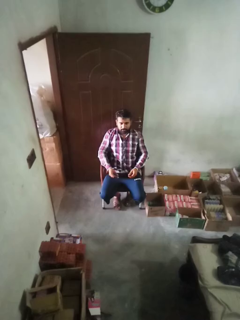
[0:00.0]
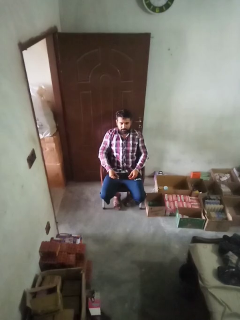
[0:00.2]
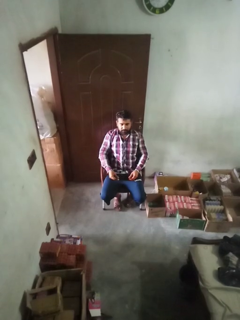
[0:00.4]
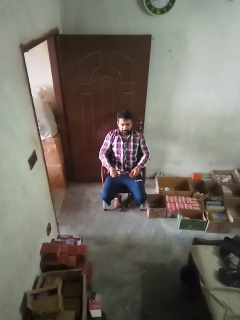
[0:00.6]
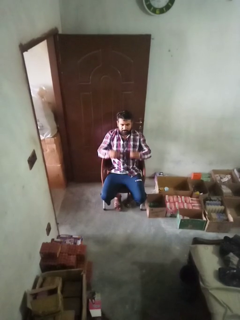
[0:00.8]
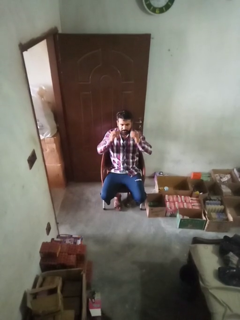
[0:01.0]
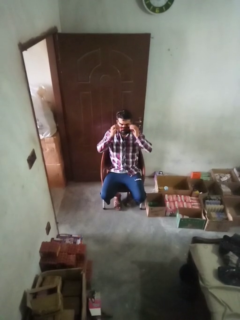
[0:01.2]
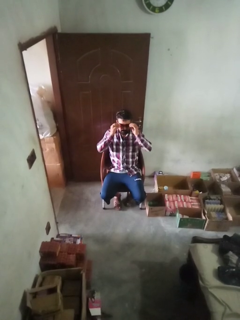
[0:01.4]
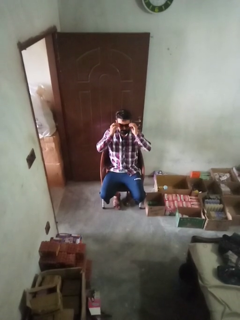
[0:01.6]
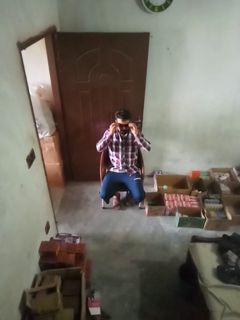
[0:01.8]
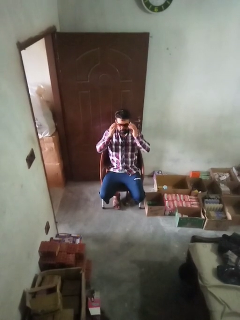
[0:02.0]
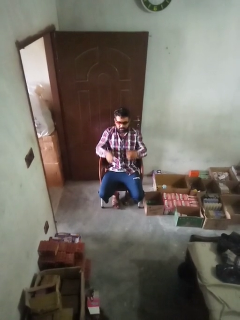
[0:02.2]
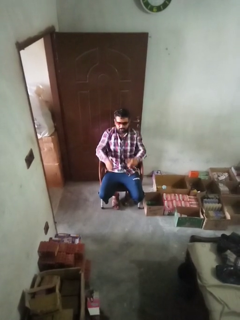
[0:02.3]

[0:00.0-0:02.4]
person puts on sunglasses

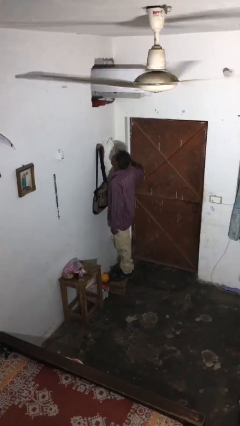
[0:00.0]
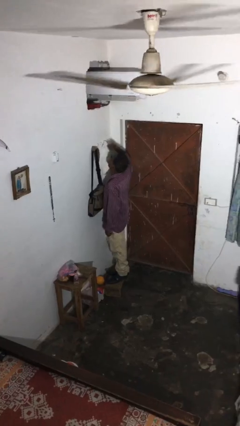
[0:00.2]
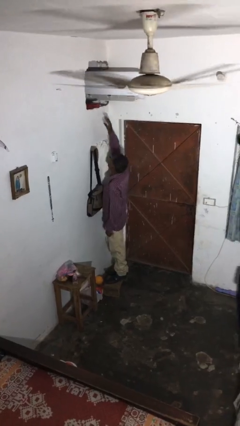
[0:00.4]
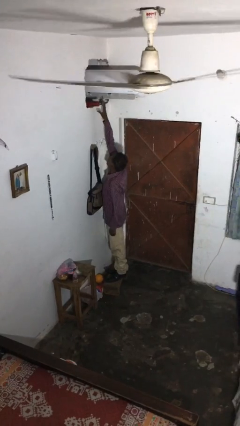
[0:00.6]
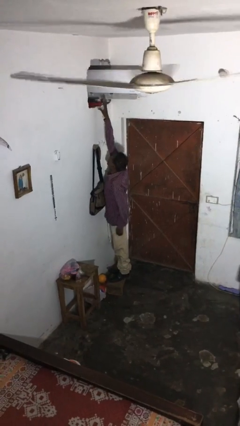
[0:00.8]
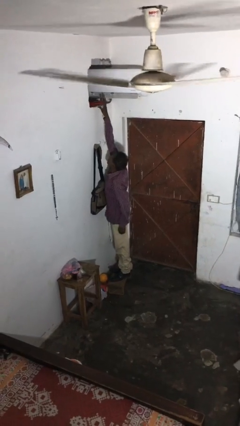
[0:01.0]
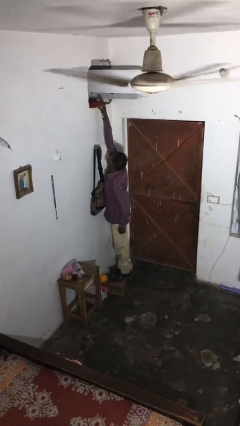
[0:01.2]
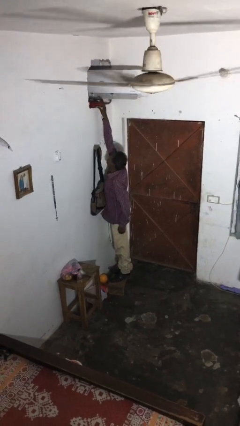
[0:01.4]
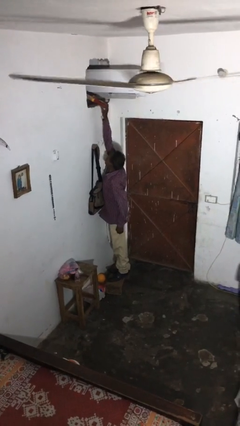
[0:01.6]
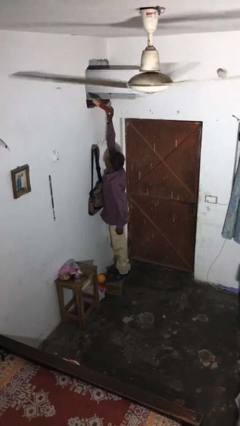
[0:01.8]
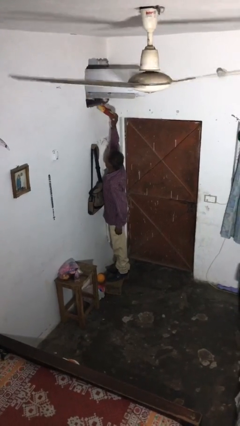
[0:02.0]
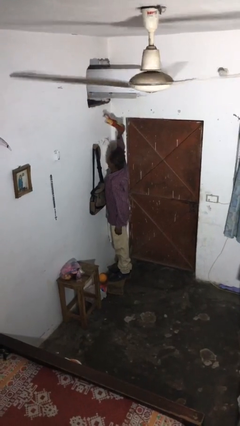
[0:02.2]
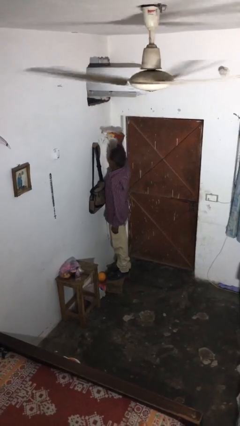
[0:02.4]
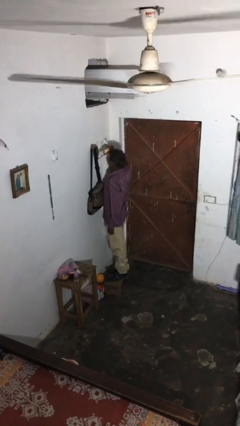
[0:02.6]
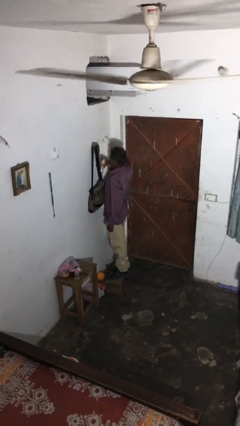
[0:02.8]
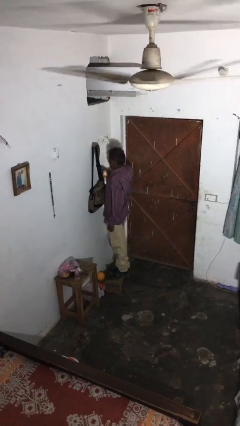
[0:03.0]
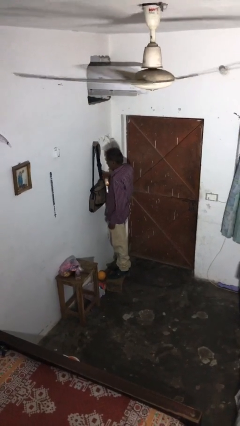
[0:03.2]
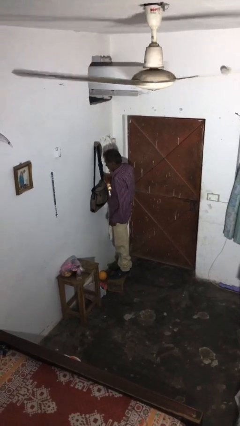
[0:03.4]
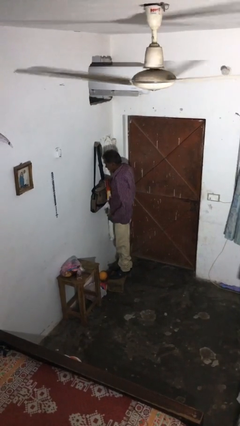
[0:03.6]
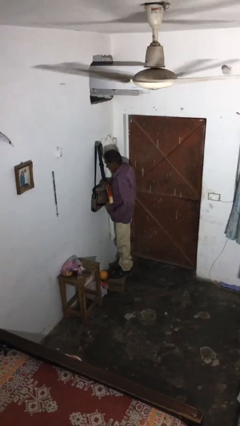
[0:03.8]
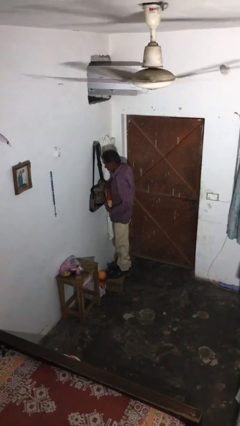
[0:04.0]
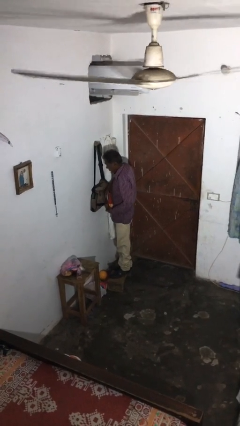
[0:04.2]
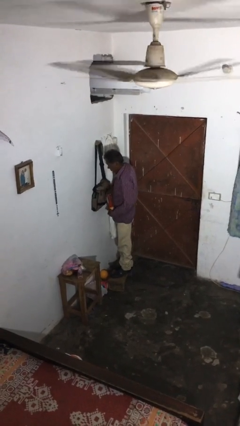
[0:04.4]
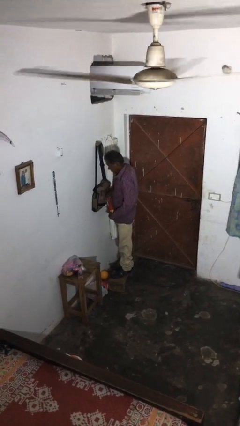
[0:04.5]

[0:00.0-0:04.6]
person picks up object from shelf

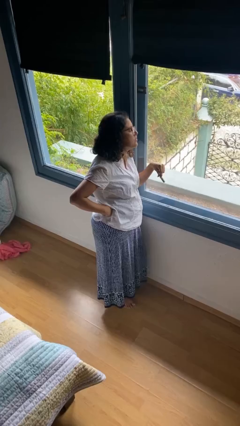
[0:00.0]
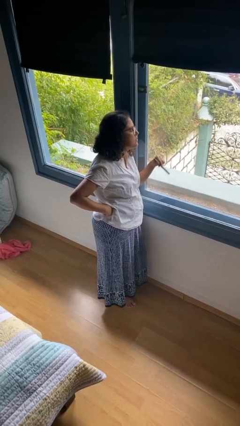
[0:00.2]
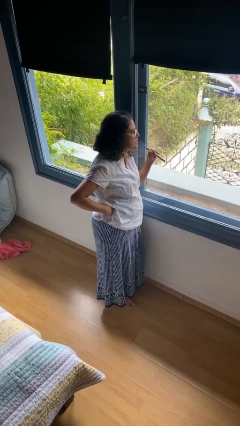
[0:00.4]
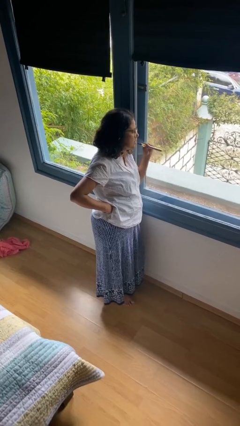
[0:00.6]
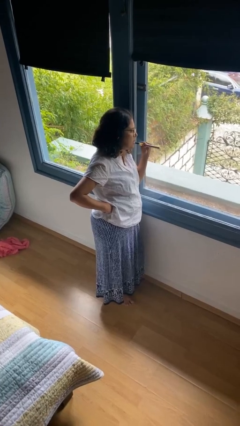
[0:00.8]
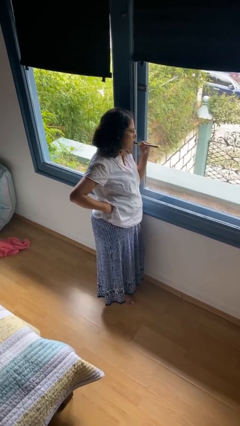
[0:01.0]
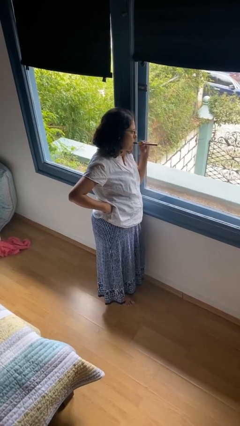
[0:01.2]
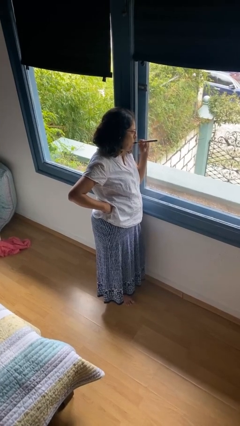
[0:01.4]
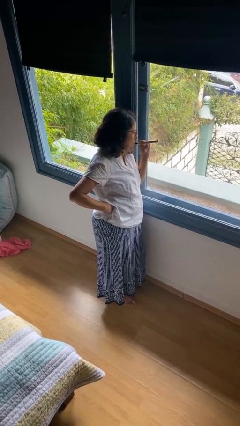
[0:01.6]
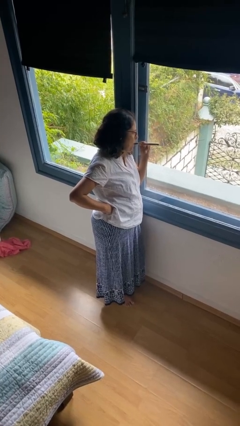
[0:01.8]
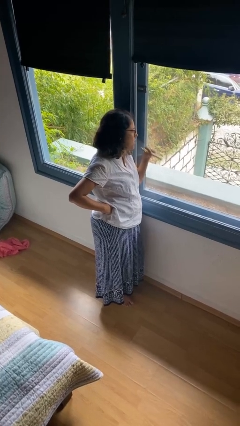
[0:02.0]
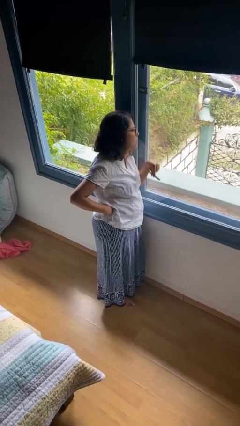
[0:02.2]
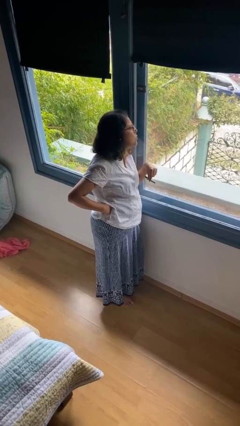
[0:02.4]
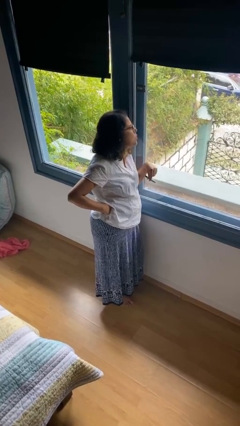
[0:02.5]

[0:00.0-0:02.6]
person vapes

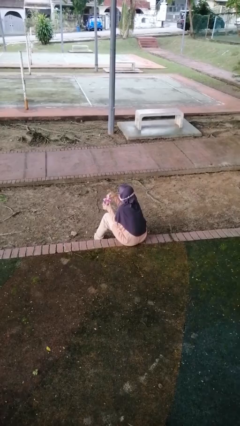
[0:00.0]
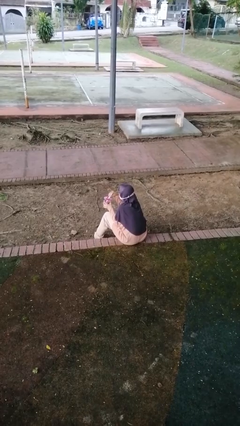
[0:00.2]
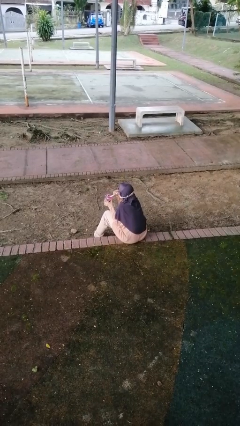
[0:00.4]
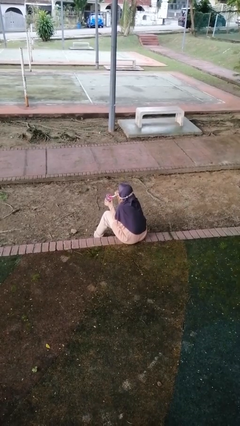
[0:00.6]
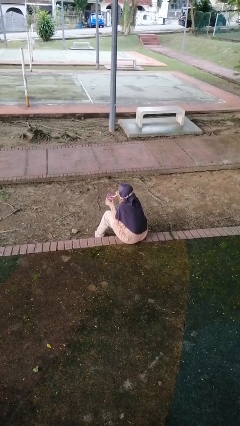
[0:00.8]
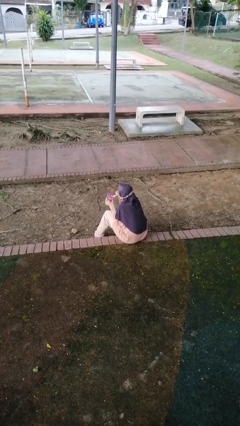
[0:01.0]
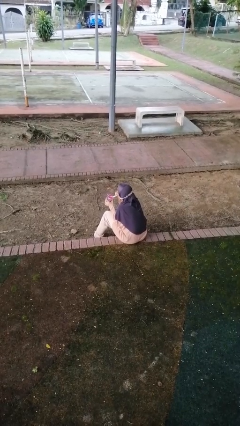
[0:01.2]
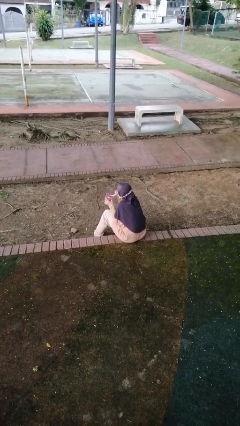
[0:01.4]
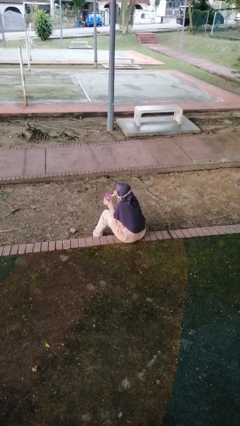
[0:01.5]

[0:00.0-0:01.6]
person drinks from straw

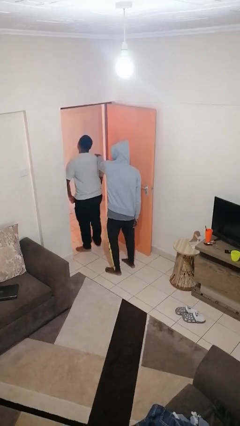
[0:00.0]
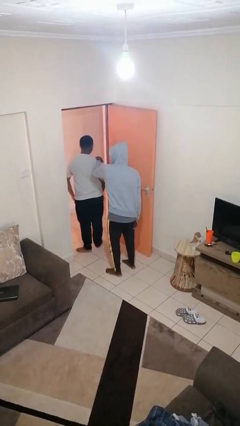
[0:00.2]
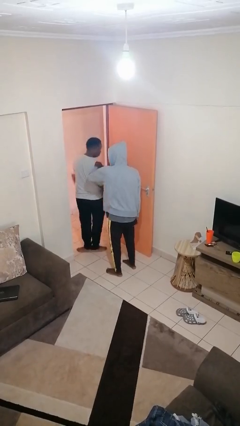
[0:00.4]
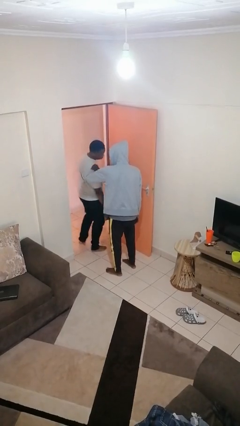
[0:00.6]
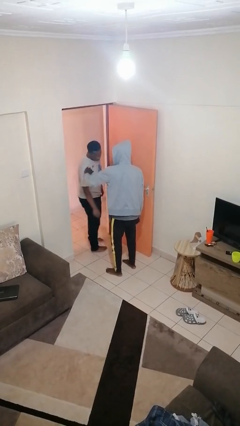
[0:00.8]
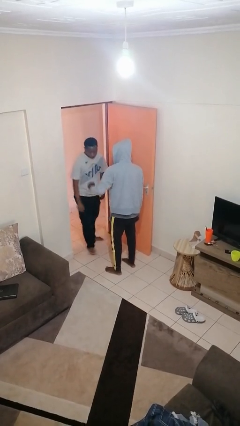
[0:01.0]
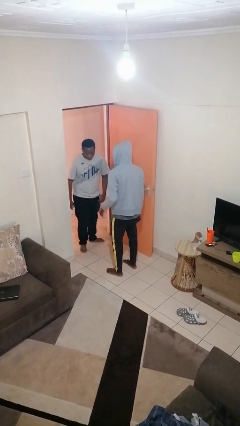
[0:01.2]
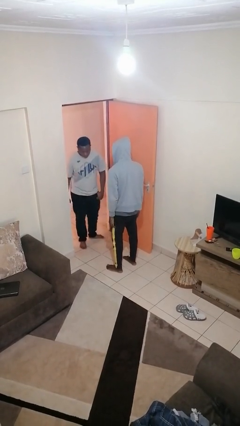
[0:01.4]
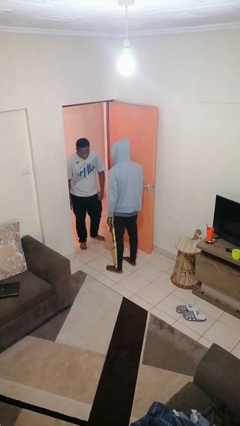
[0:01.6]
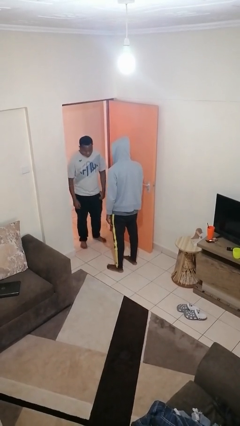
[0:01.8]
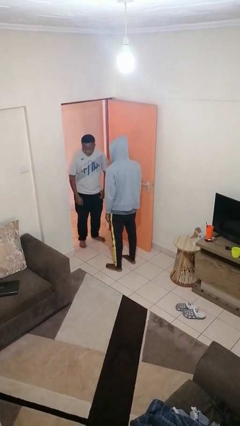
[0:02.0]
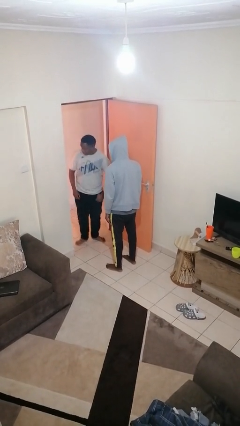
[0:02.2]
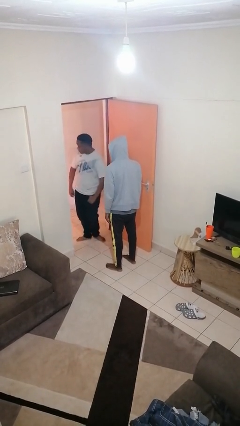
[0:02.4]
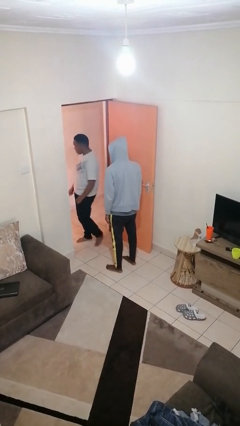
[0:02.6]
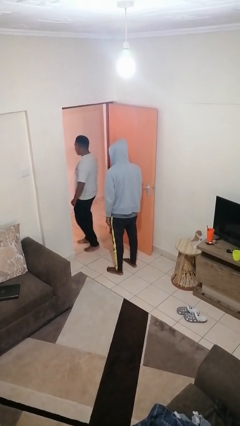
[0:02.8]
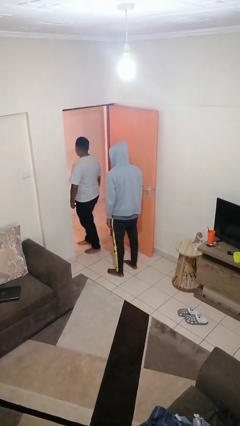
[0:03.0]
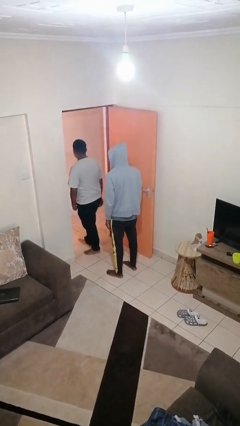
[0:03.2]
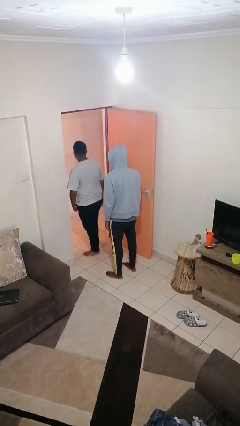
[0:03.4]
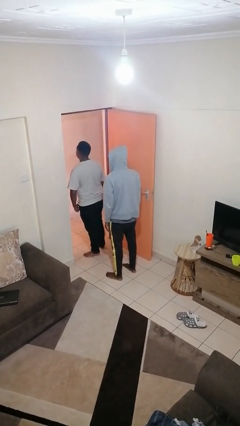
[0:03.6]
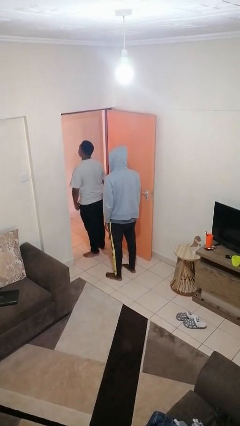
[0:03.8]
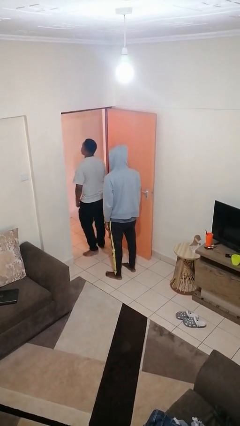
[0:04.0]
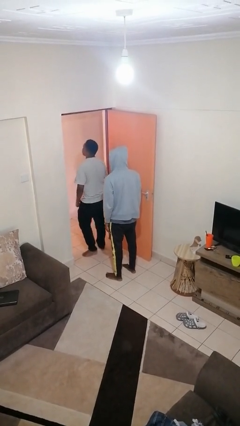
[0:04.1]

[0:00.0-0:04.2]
person spins person around

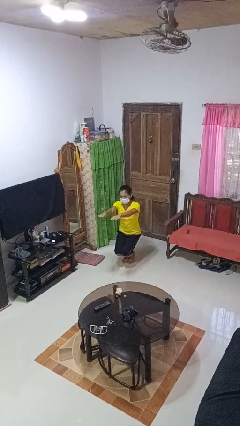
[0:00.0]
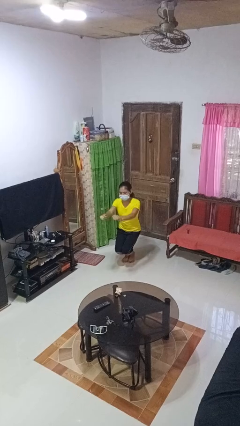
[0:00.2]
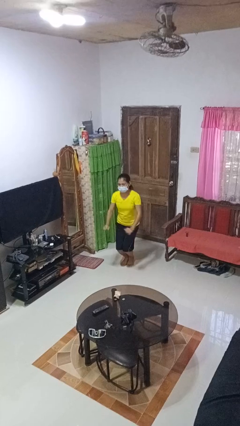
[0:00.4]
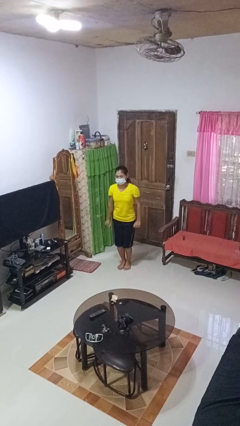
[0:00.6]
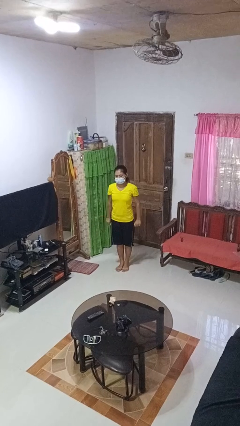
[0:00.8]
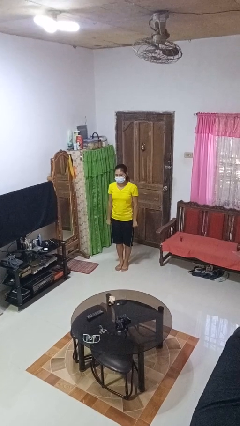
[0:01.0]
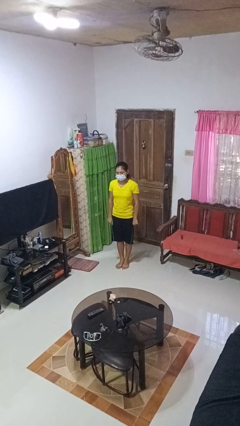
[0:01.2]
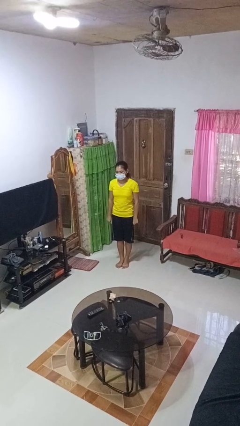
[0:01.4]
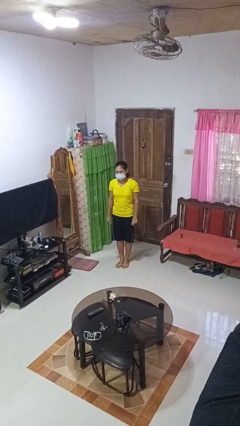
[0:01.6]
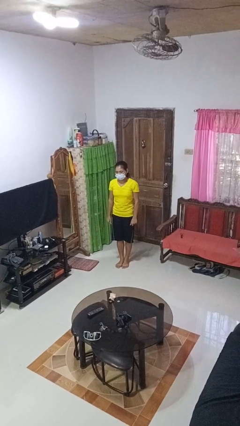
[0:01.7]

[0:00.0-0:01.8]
person stands up

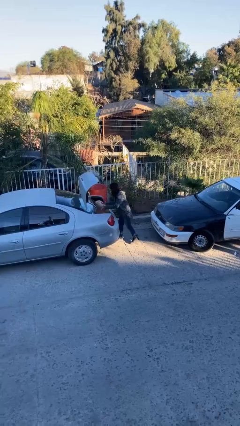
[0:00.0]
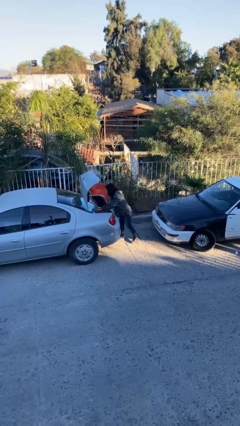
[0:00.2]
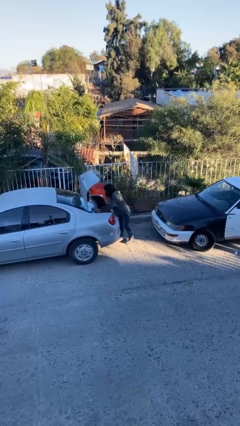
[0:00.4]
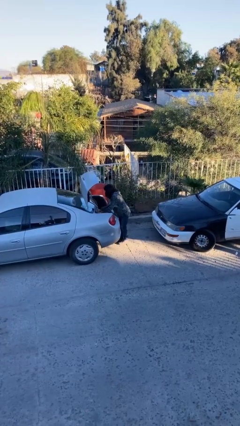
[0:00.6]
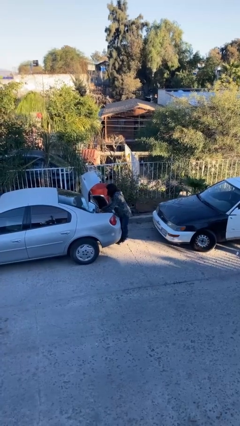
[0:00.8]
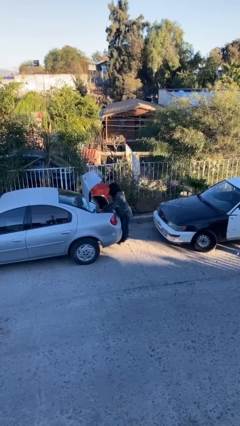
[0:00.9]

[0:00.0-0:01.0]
person loads car
